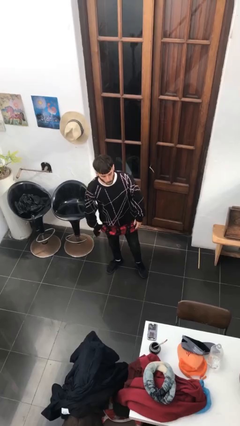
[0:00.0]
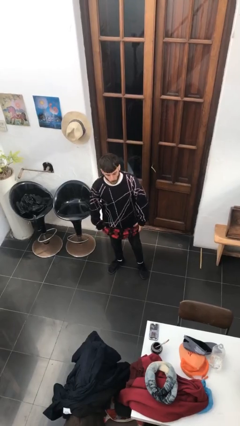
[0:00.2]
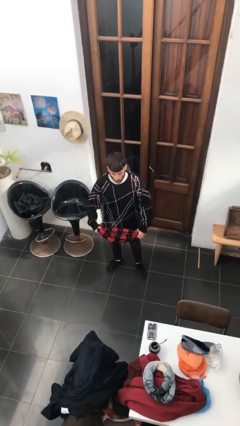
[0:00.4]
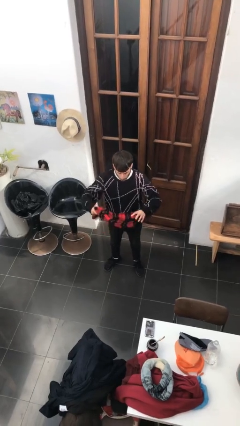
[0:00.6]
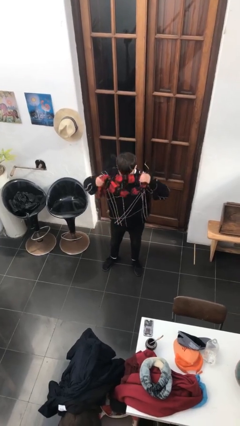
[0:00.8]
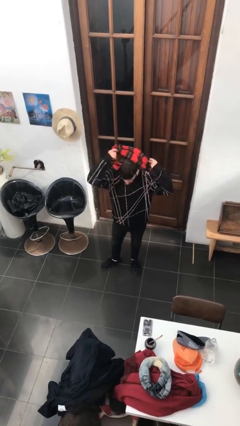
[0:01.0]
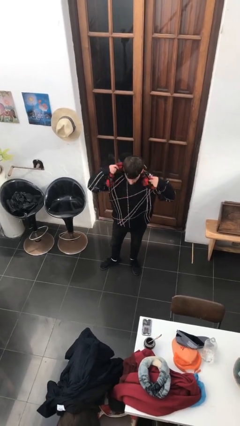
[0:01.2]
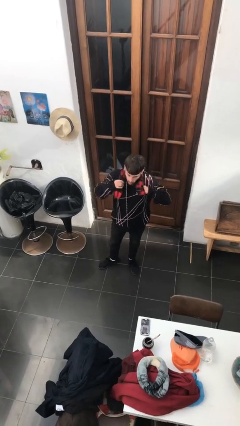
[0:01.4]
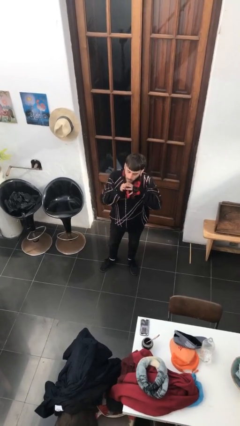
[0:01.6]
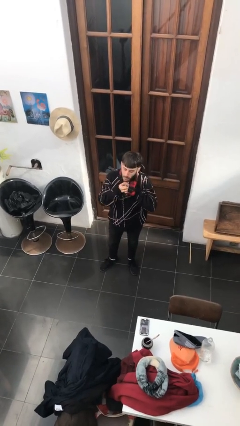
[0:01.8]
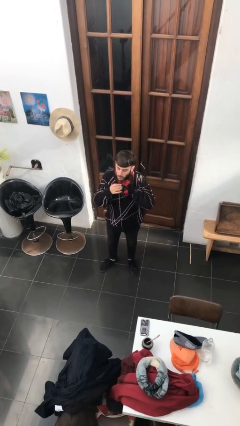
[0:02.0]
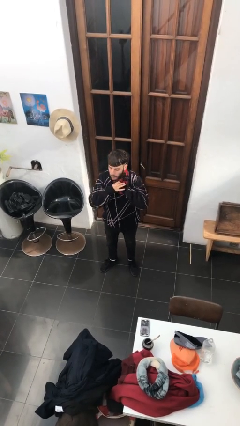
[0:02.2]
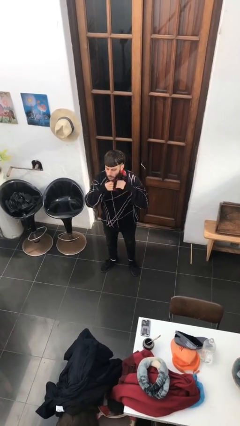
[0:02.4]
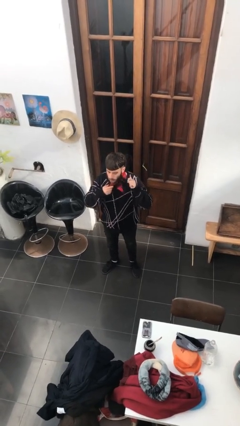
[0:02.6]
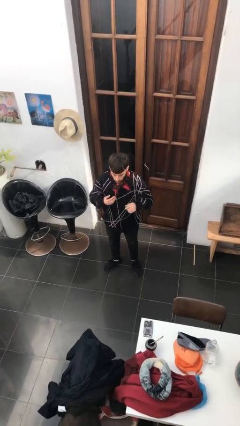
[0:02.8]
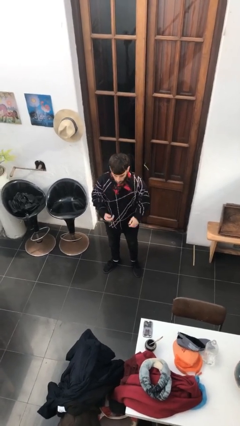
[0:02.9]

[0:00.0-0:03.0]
person puts on scarf

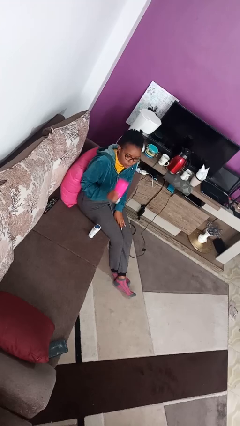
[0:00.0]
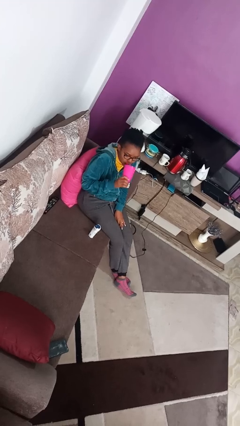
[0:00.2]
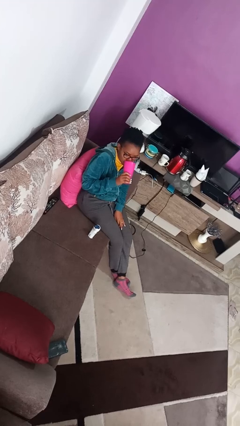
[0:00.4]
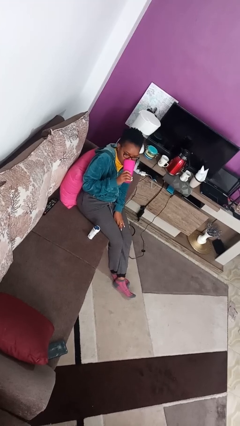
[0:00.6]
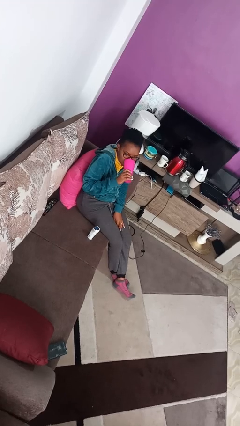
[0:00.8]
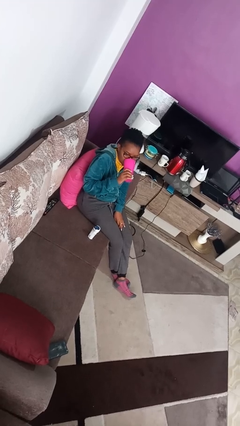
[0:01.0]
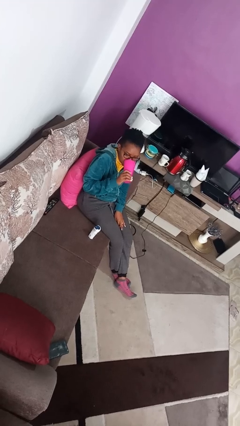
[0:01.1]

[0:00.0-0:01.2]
person drinks from cup

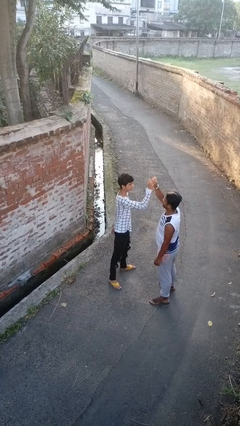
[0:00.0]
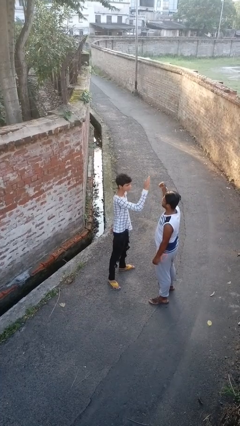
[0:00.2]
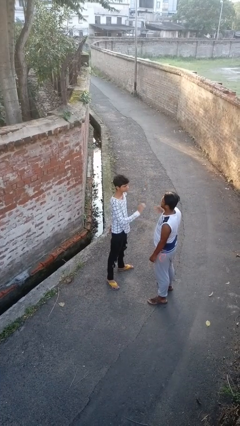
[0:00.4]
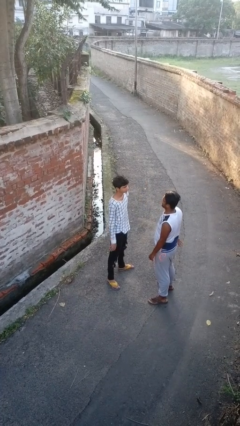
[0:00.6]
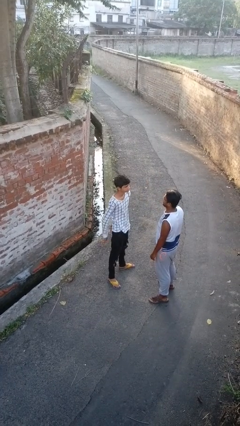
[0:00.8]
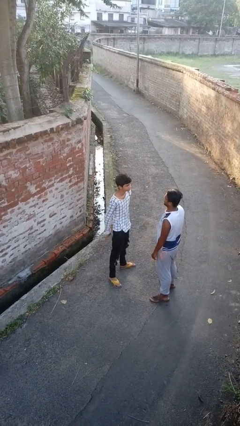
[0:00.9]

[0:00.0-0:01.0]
person highfives hand

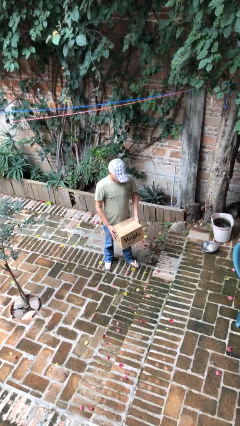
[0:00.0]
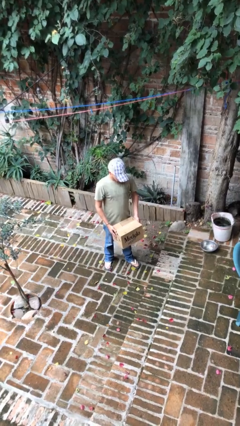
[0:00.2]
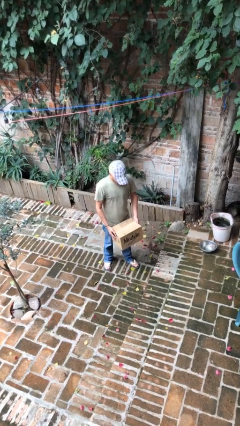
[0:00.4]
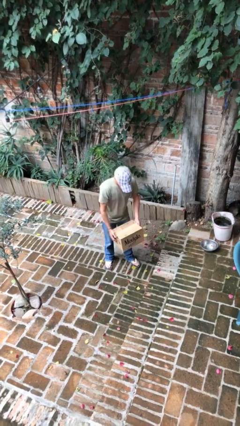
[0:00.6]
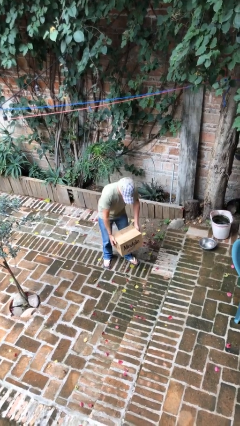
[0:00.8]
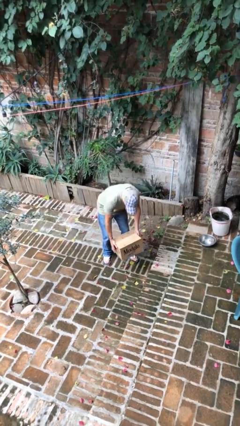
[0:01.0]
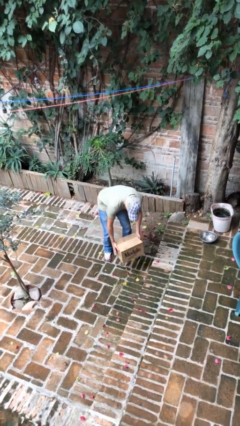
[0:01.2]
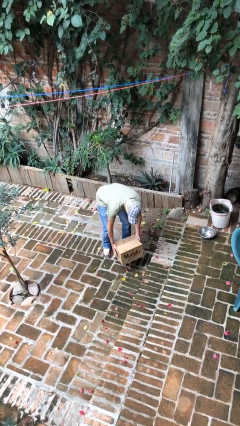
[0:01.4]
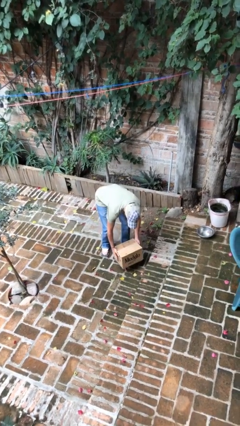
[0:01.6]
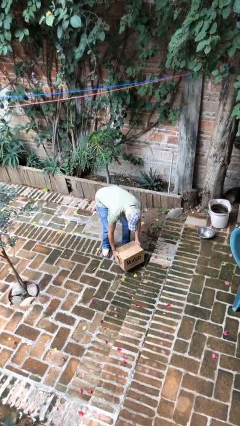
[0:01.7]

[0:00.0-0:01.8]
person puts down object on floor

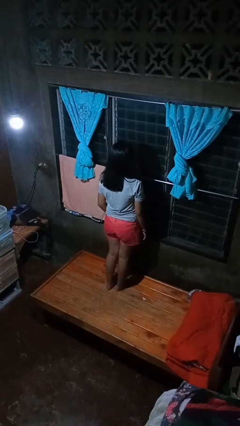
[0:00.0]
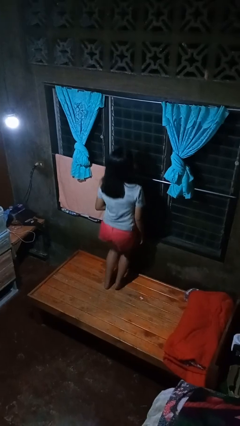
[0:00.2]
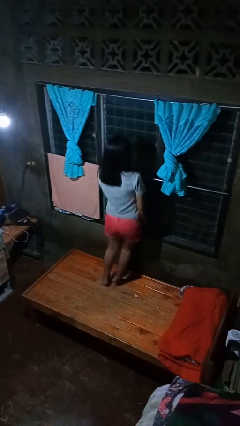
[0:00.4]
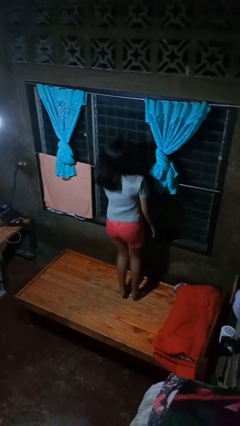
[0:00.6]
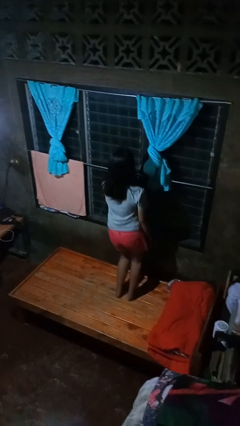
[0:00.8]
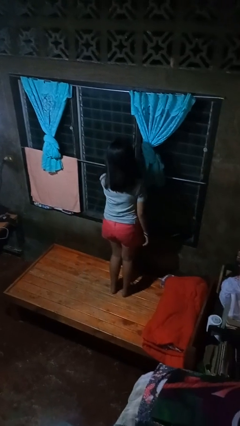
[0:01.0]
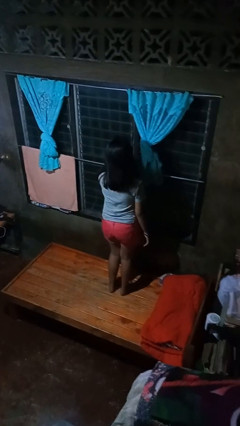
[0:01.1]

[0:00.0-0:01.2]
person jumps on bed

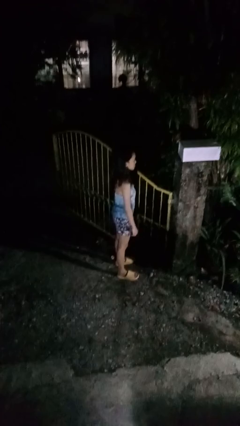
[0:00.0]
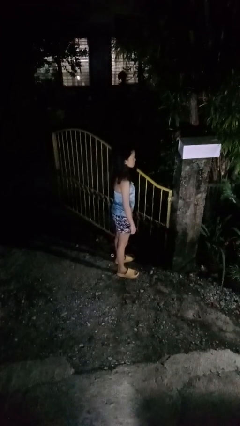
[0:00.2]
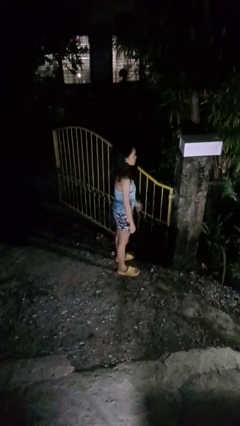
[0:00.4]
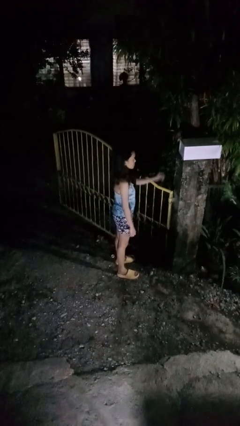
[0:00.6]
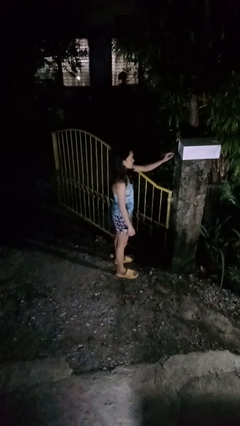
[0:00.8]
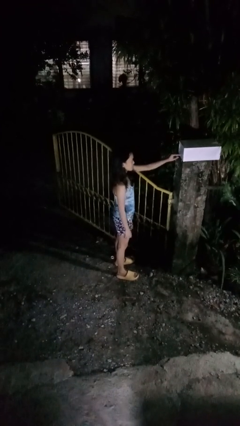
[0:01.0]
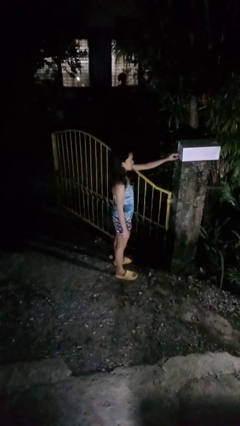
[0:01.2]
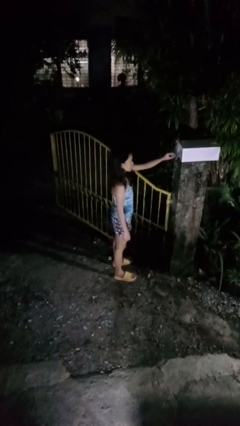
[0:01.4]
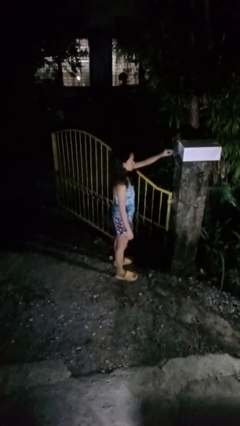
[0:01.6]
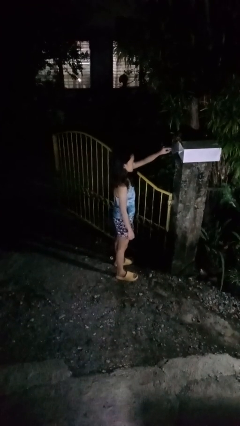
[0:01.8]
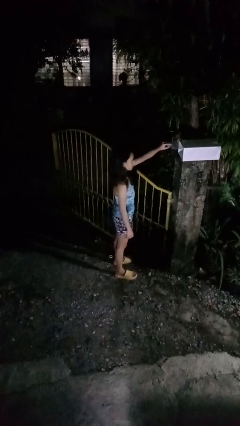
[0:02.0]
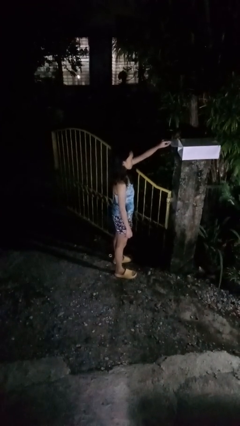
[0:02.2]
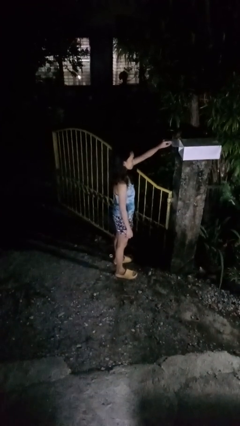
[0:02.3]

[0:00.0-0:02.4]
person opens mailbox

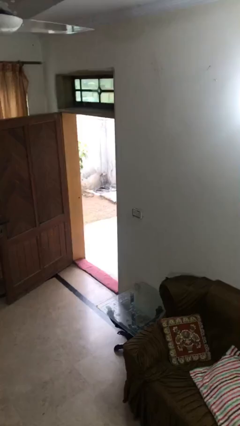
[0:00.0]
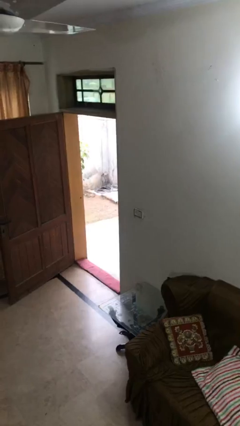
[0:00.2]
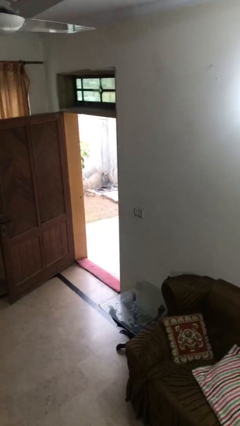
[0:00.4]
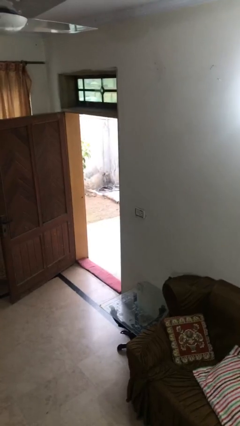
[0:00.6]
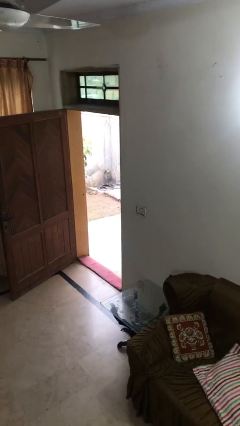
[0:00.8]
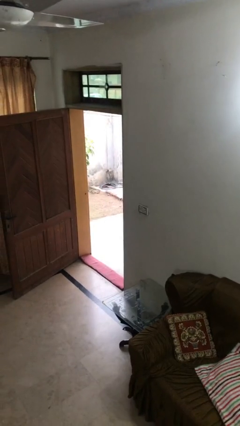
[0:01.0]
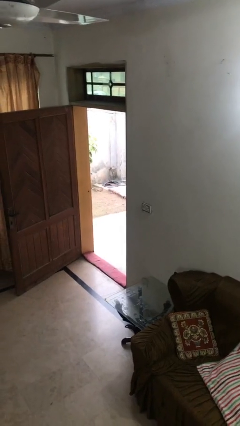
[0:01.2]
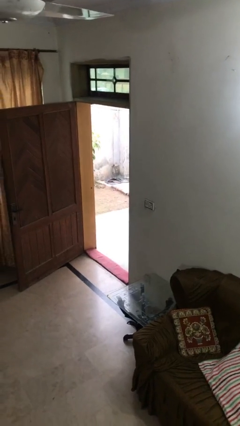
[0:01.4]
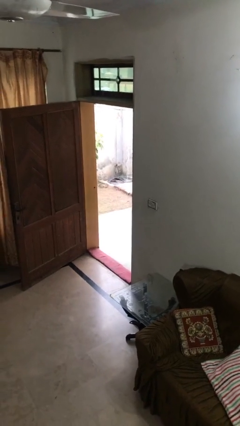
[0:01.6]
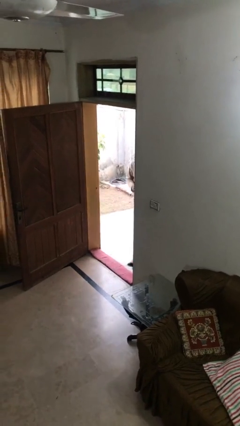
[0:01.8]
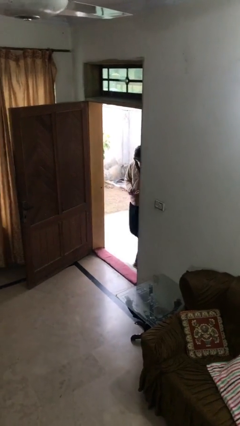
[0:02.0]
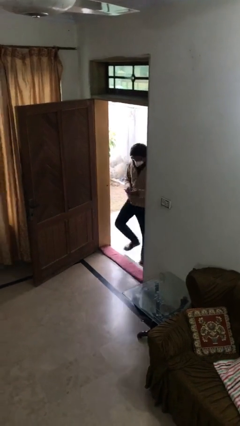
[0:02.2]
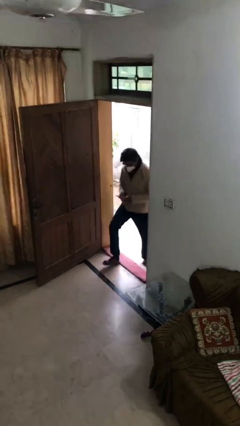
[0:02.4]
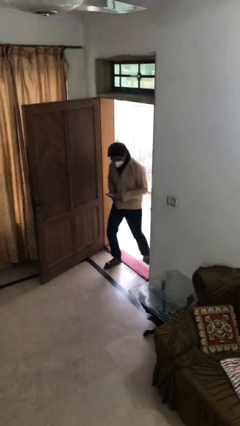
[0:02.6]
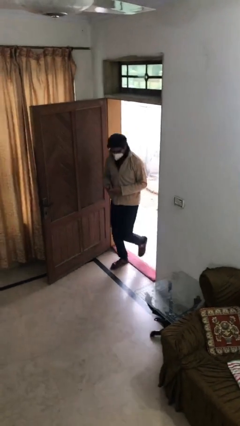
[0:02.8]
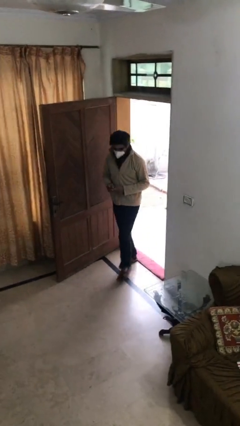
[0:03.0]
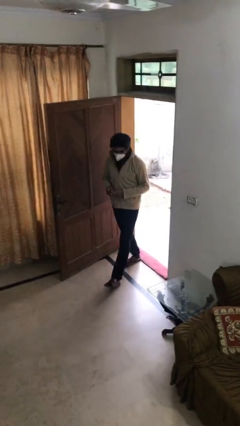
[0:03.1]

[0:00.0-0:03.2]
person enters scene through structure

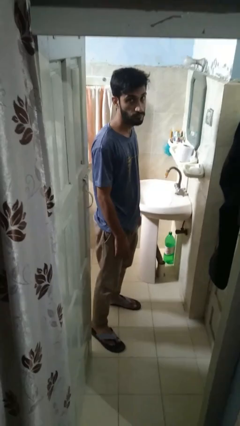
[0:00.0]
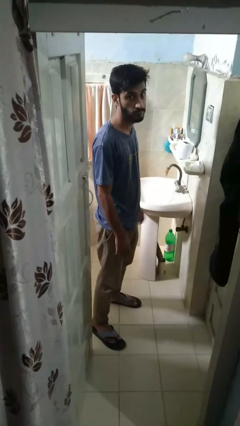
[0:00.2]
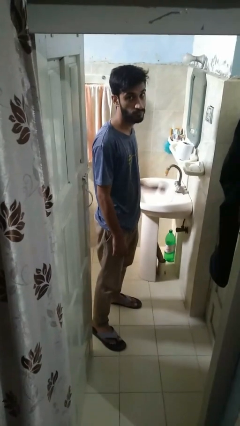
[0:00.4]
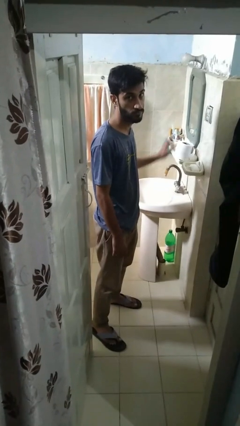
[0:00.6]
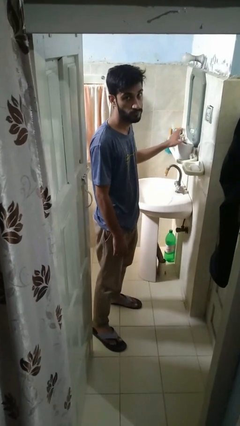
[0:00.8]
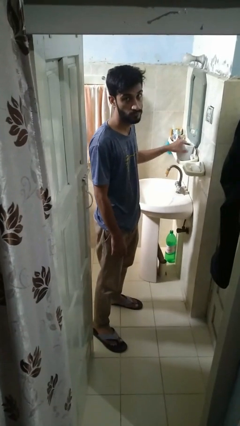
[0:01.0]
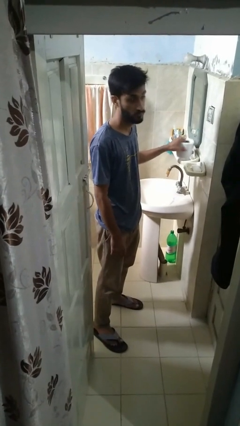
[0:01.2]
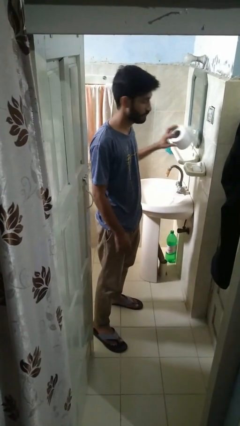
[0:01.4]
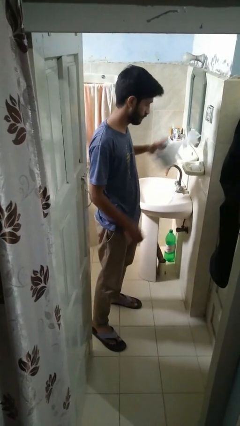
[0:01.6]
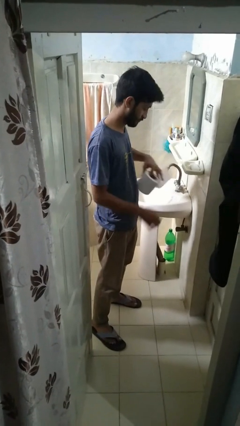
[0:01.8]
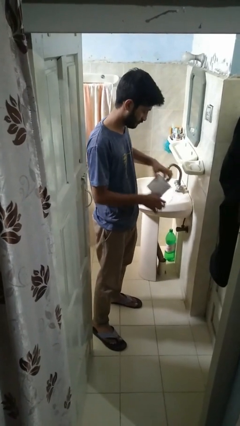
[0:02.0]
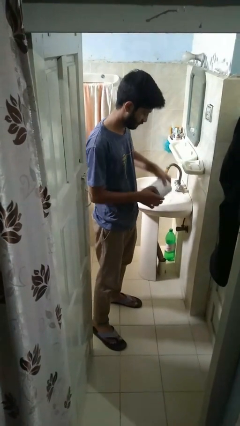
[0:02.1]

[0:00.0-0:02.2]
person picks up object from countertop

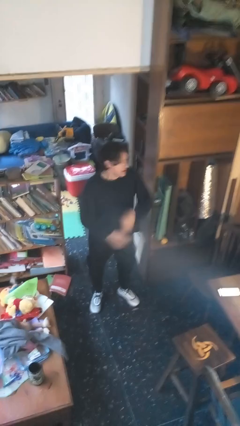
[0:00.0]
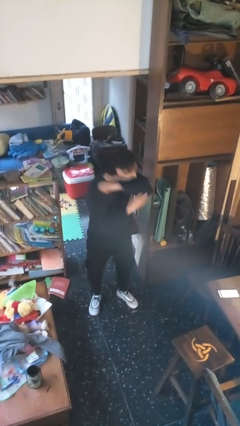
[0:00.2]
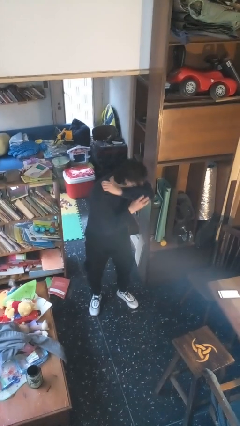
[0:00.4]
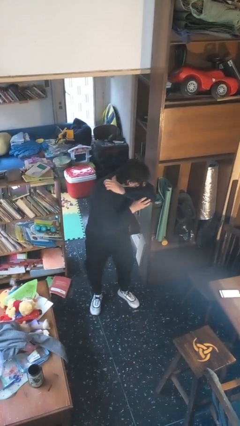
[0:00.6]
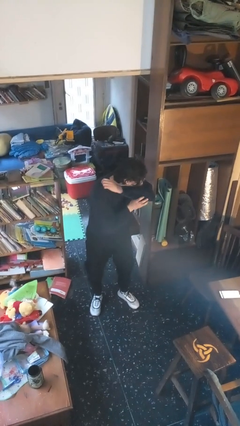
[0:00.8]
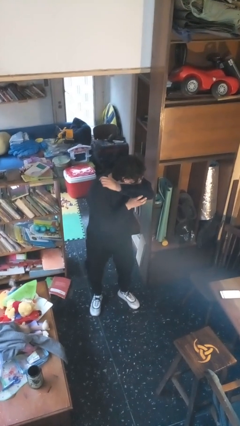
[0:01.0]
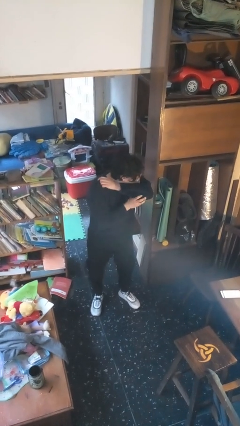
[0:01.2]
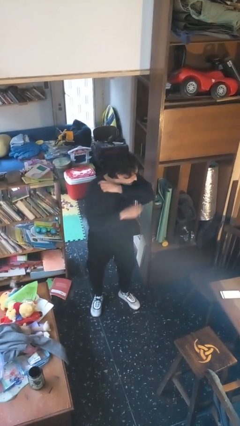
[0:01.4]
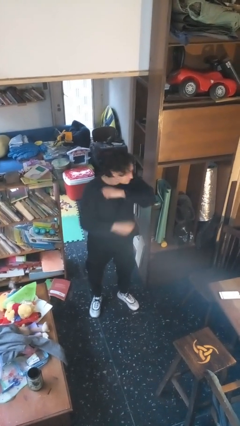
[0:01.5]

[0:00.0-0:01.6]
person sneezes into arm
